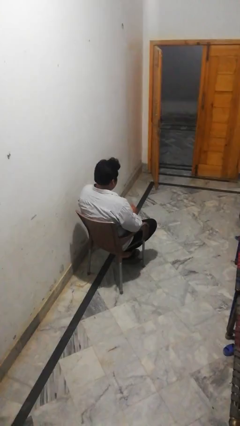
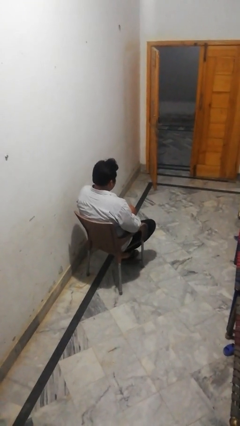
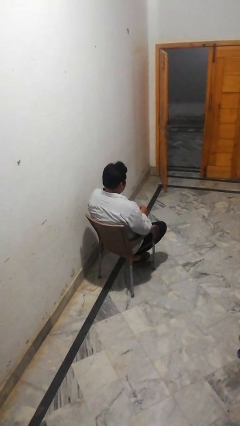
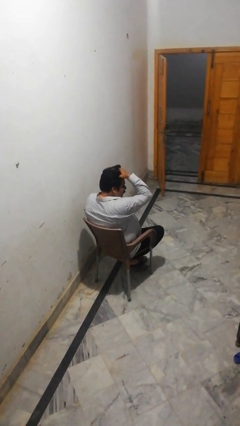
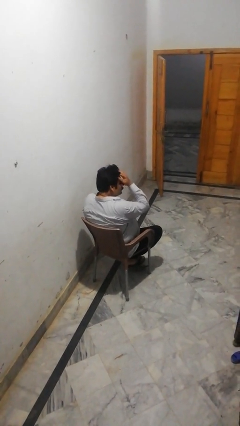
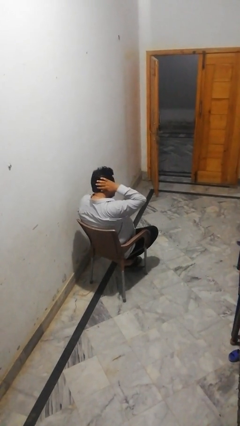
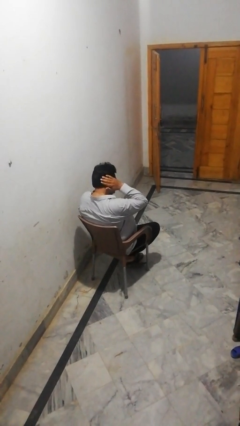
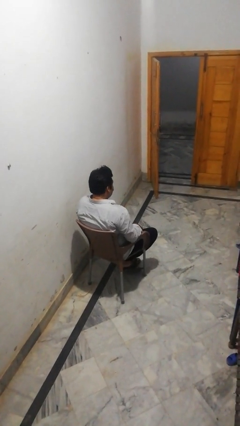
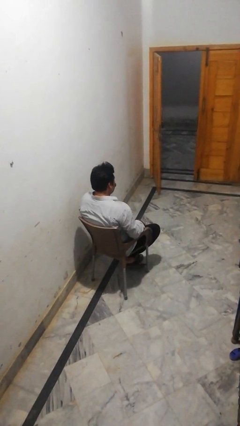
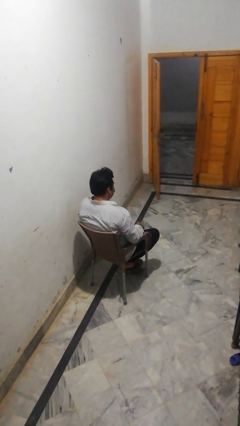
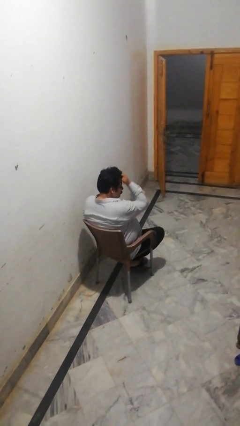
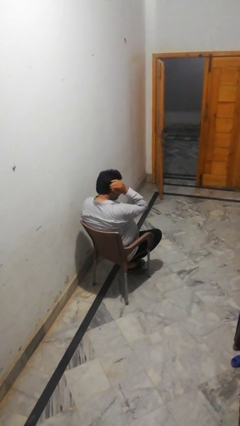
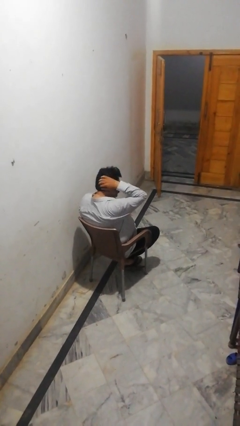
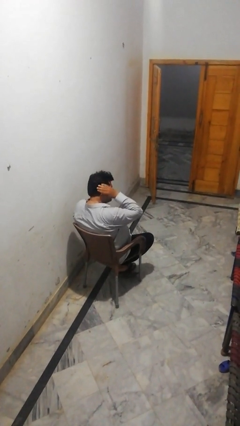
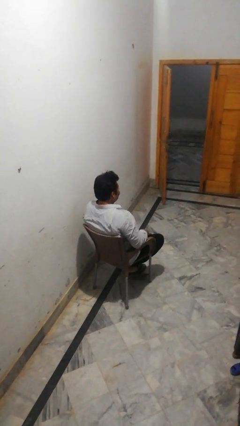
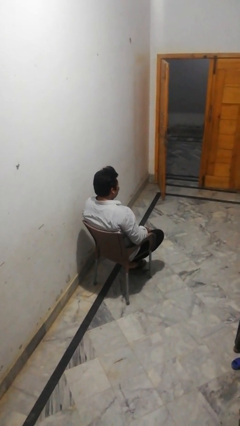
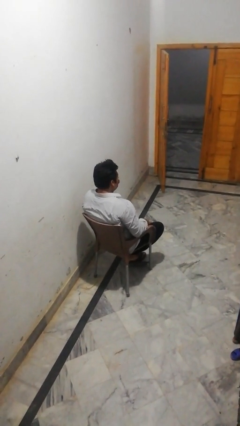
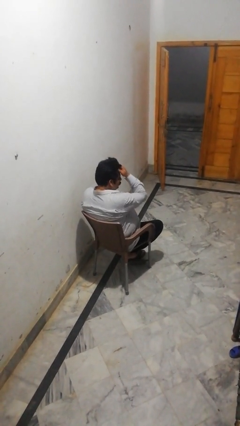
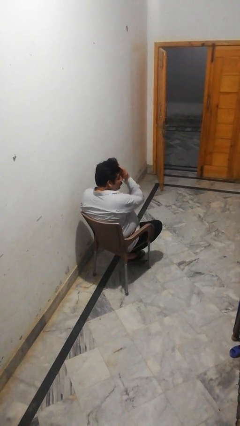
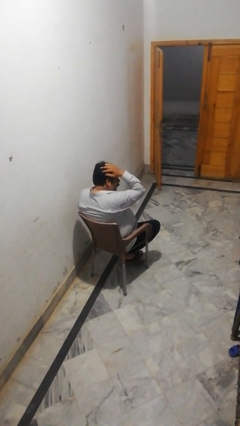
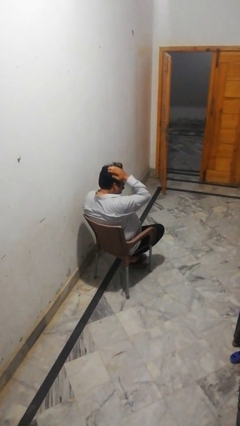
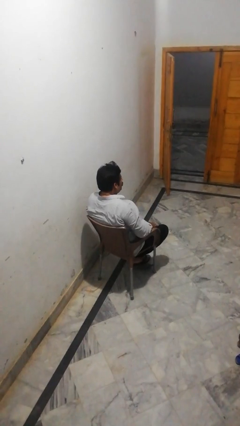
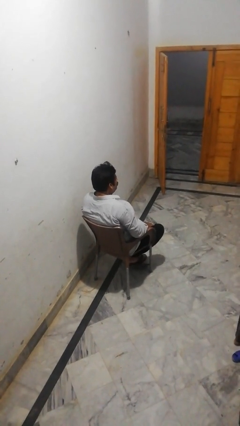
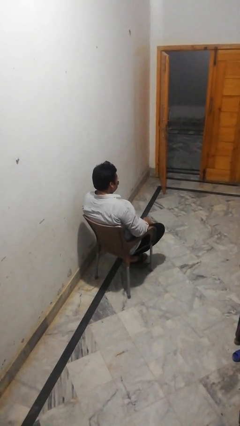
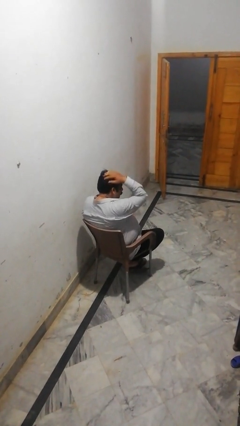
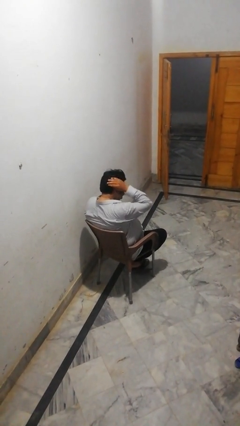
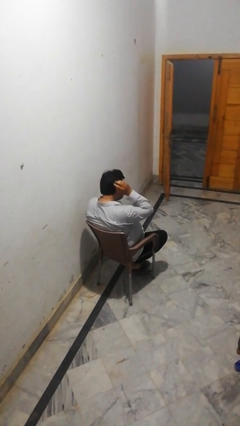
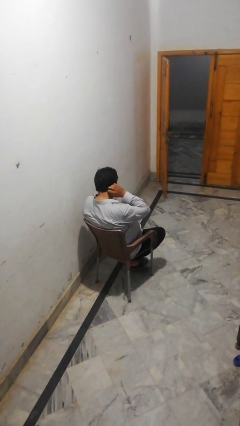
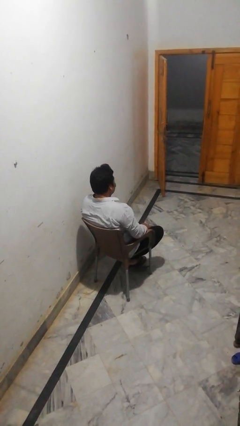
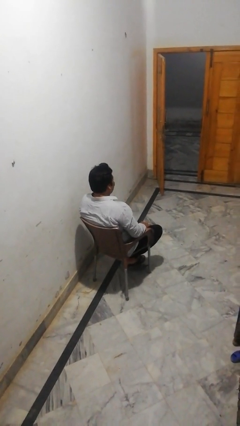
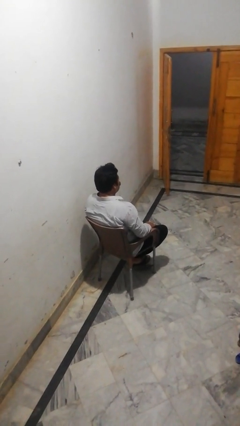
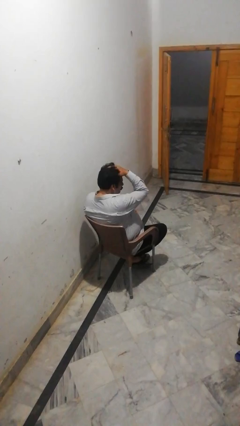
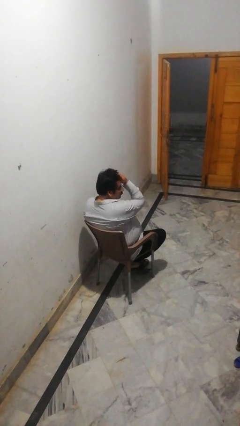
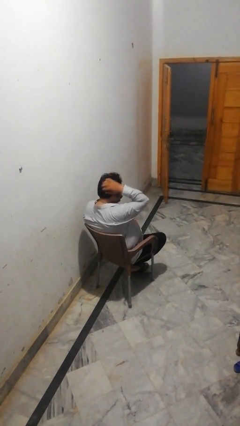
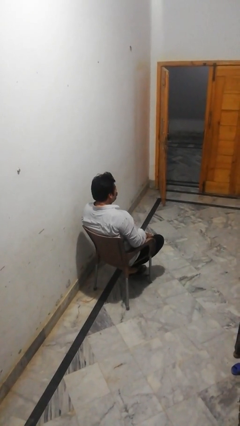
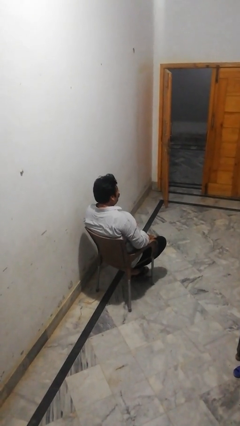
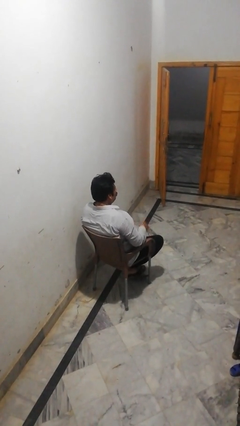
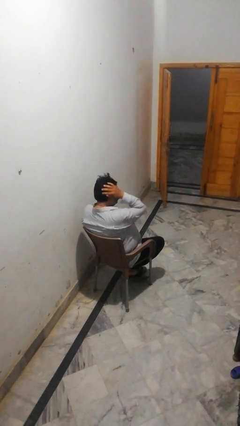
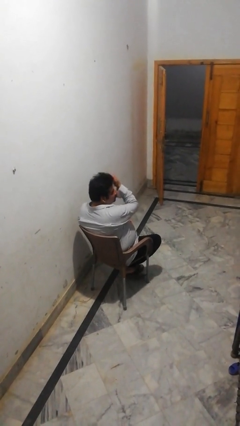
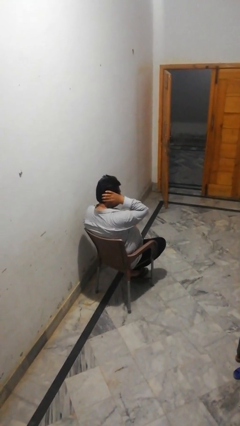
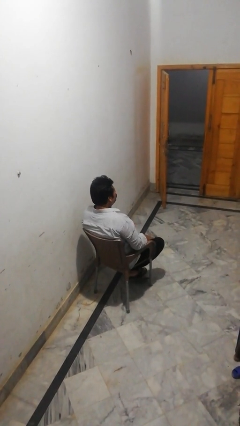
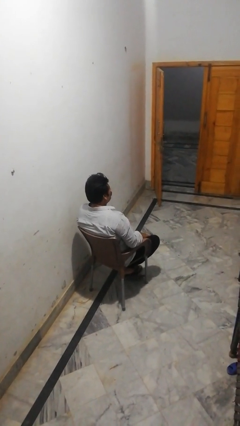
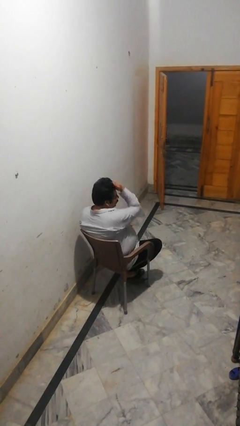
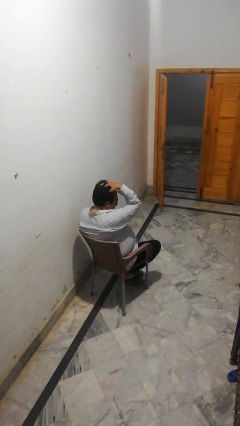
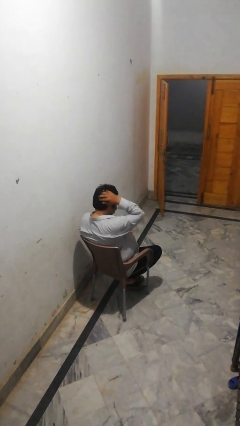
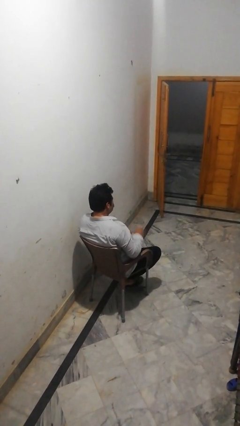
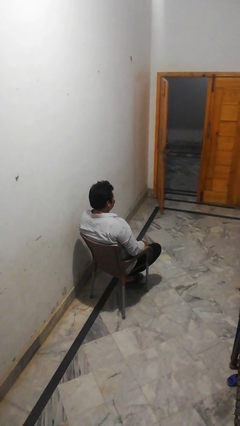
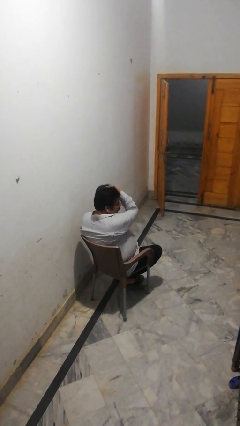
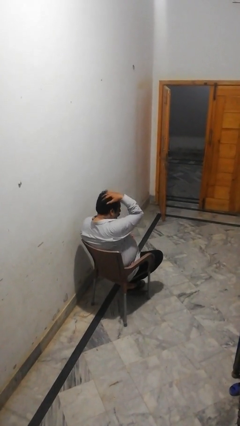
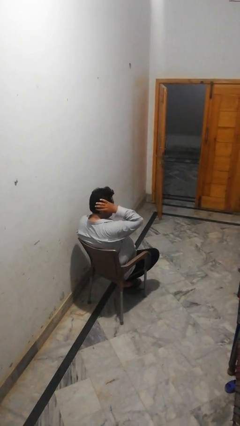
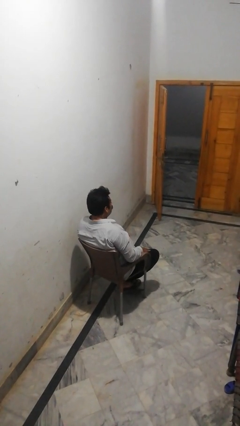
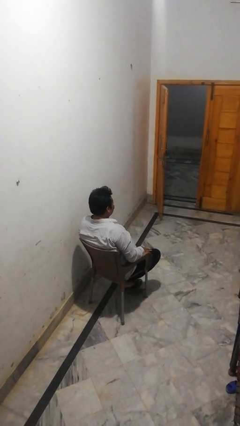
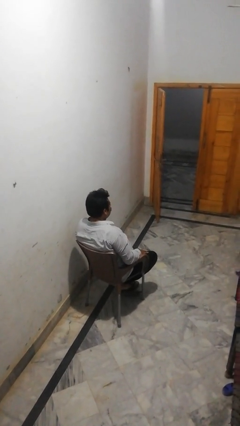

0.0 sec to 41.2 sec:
person strokes hair

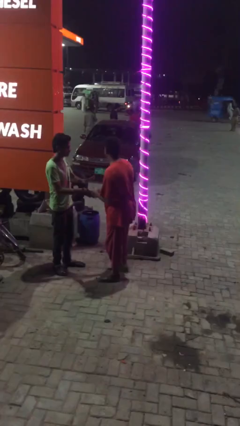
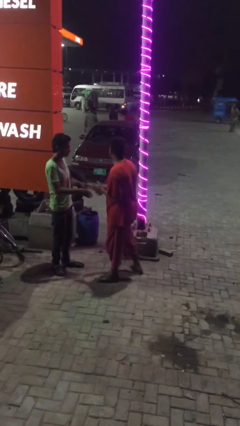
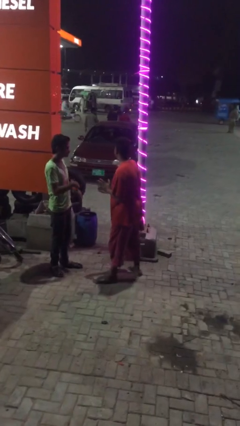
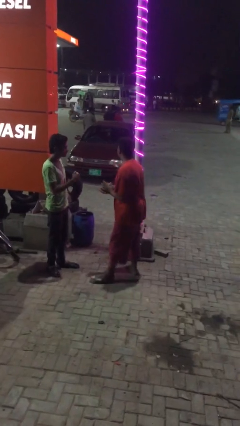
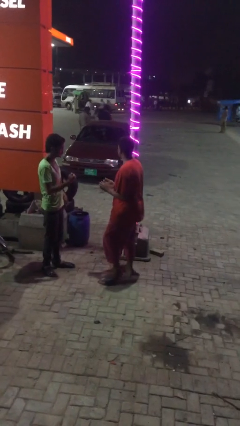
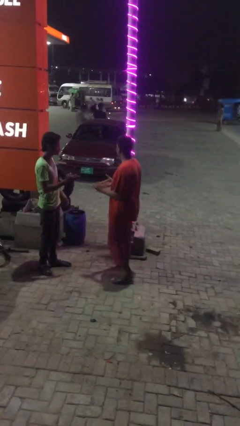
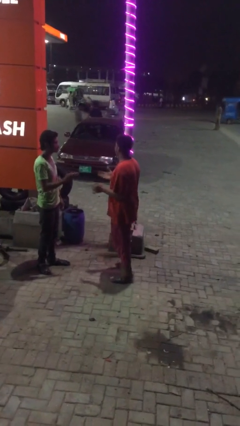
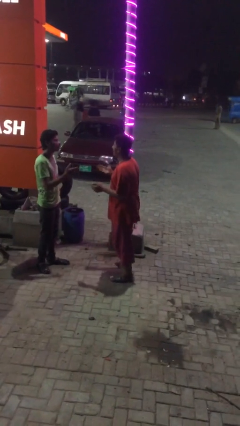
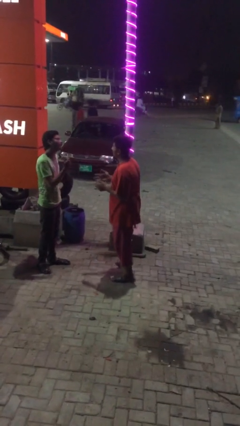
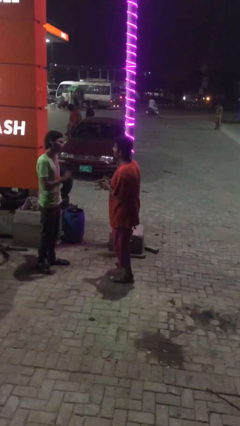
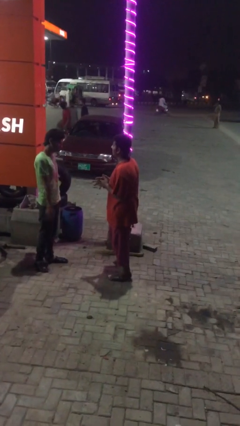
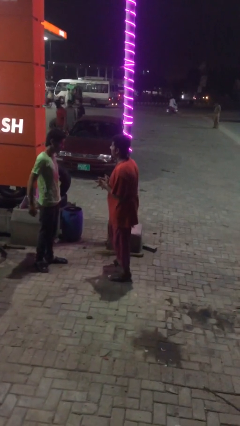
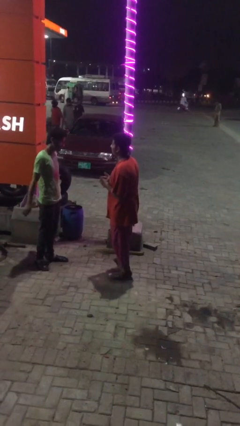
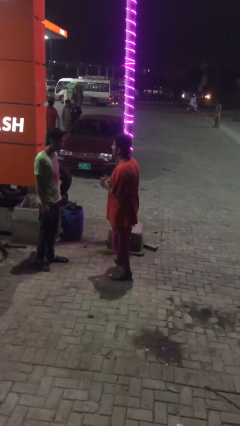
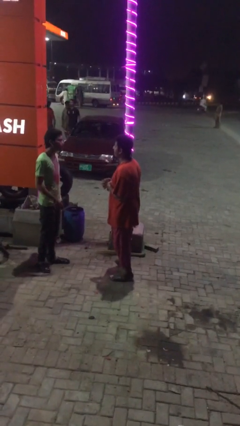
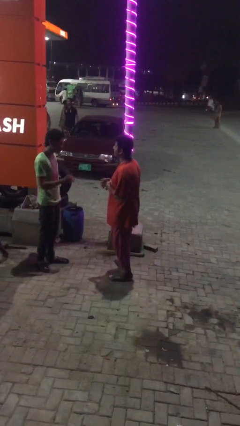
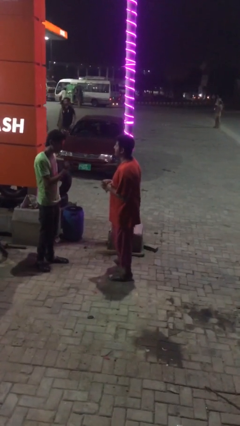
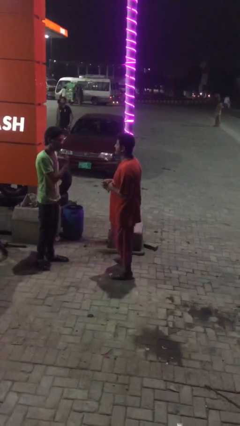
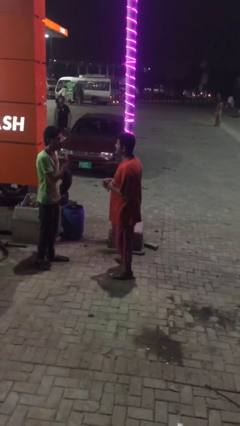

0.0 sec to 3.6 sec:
person talks to person

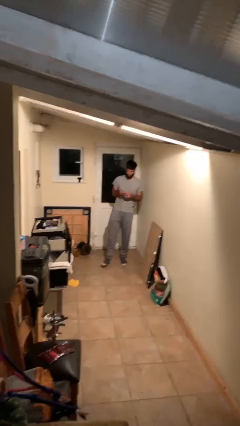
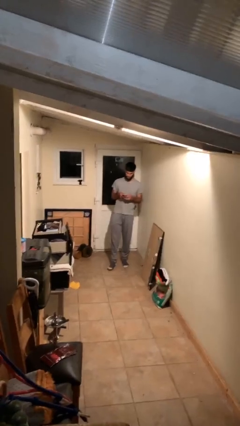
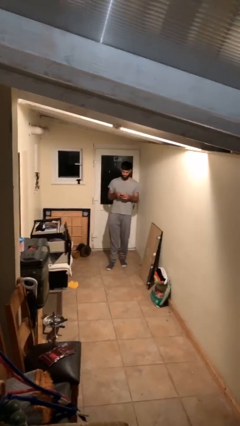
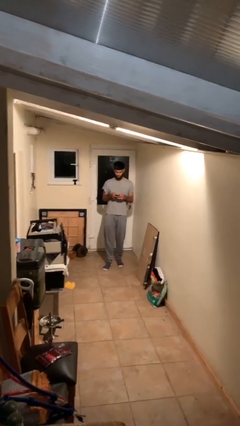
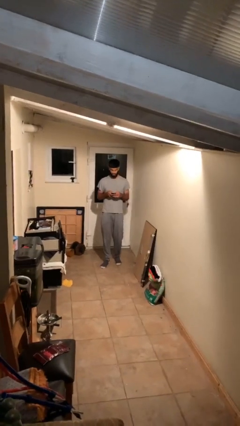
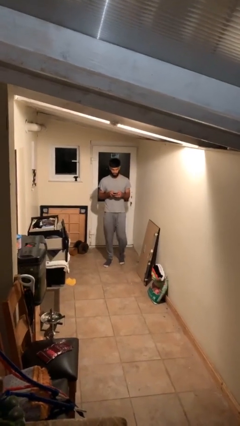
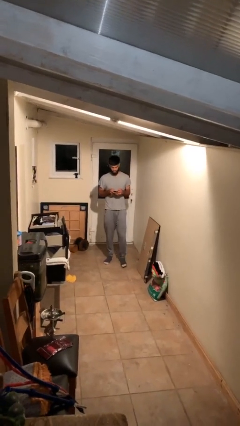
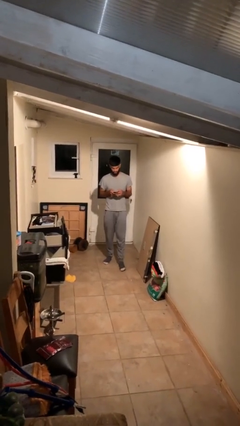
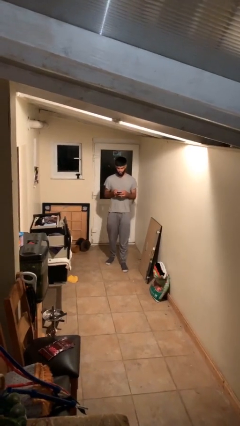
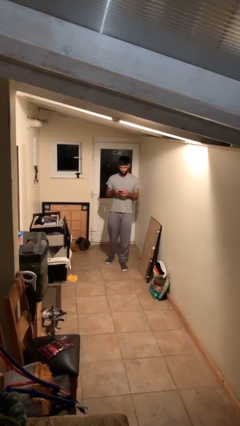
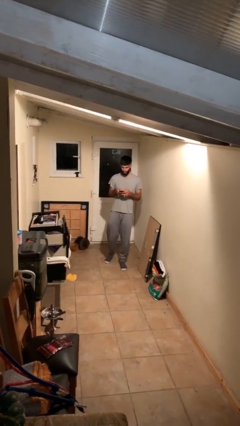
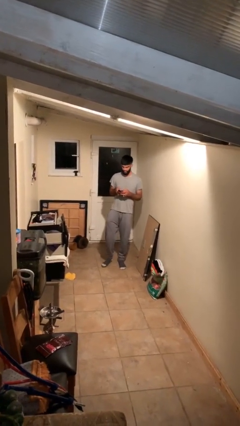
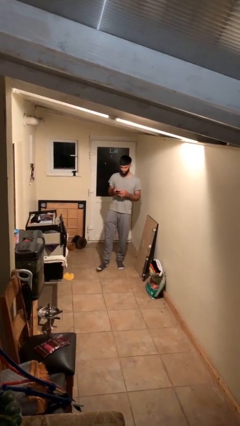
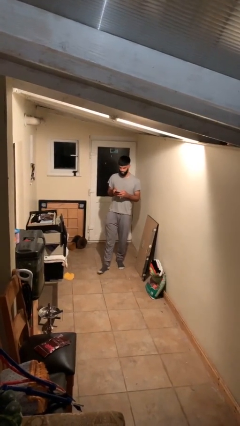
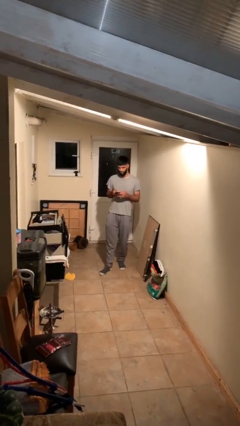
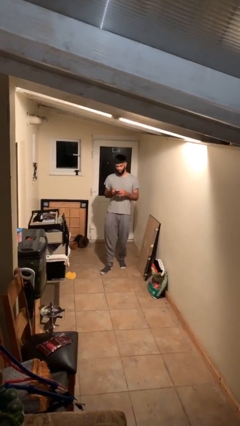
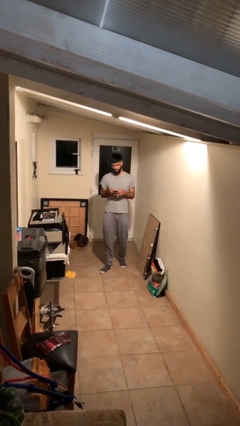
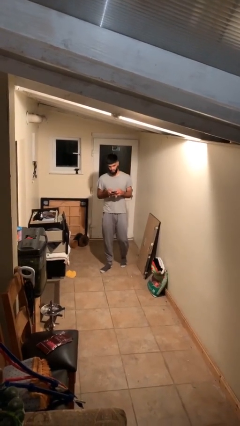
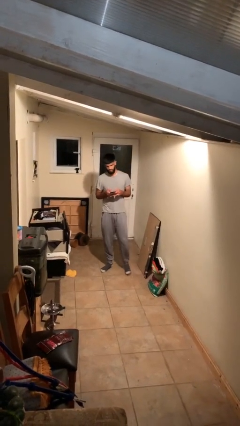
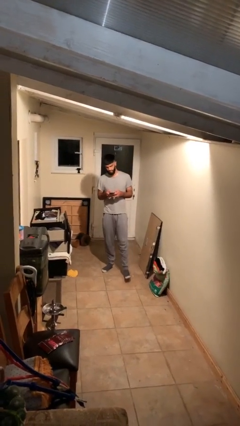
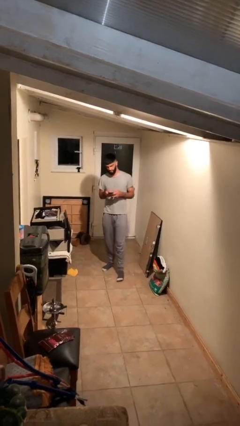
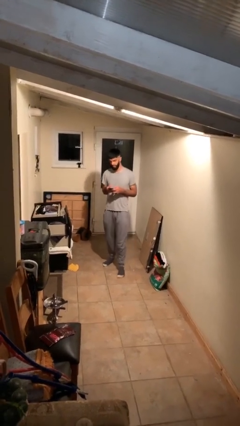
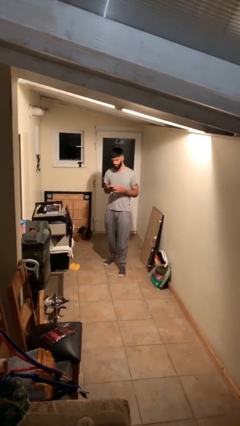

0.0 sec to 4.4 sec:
person texts on phone
